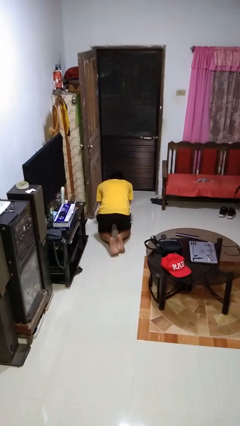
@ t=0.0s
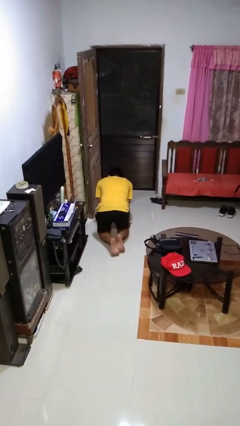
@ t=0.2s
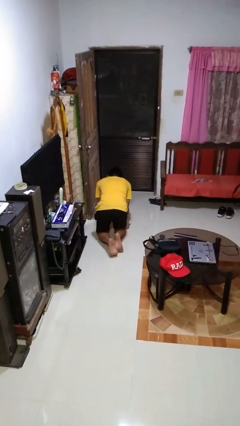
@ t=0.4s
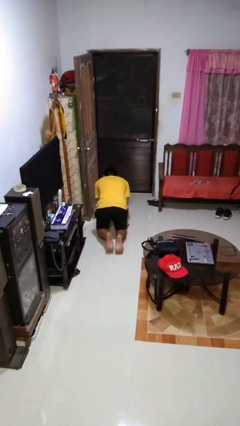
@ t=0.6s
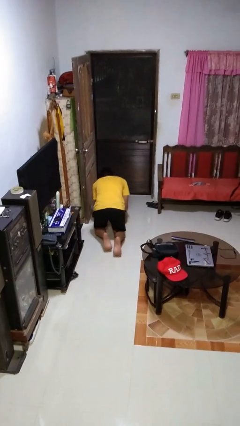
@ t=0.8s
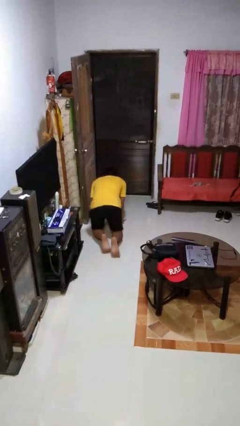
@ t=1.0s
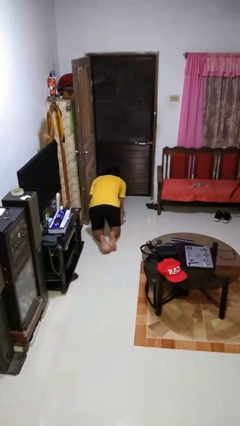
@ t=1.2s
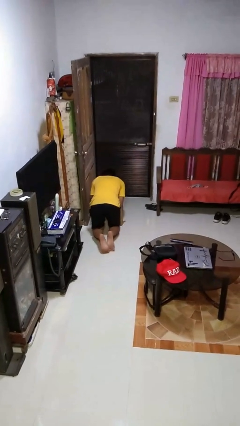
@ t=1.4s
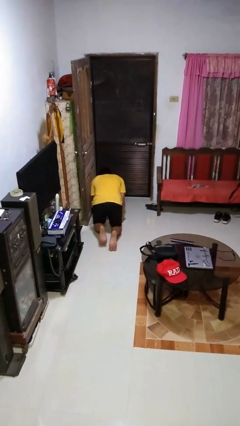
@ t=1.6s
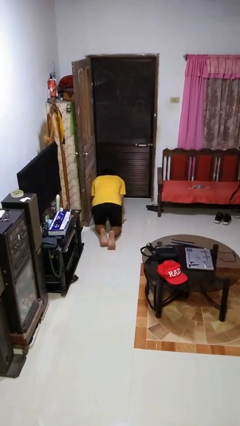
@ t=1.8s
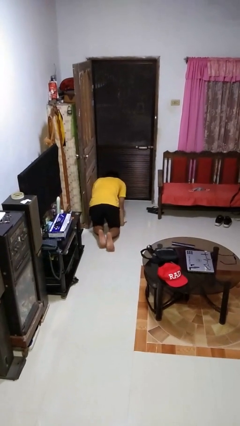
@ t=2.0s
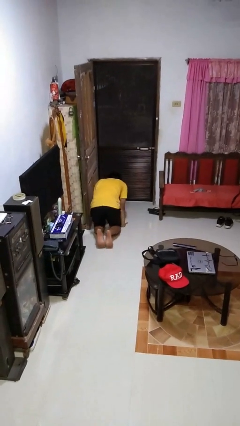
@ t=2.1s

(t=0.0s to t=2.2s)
person crawls

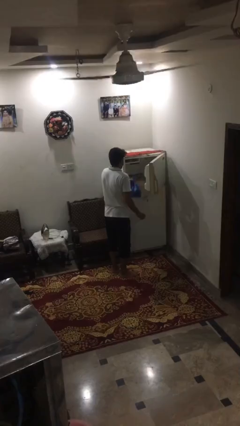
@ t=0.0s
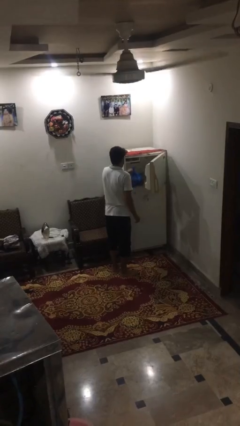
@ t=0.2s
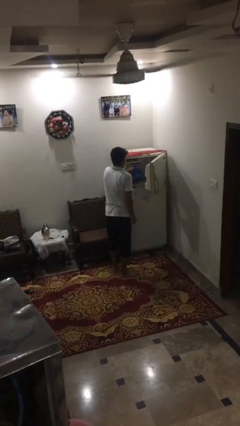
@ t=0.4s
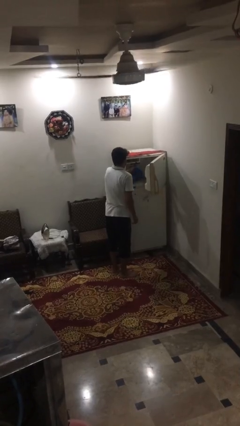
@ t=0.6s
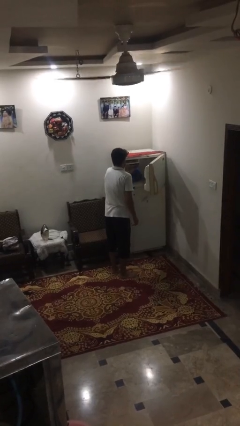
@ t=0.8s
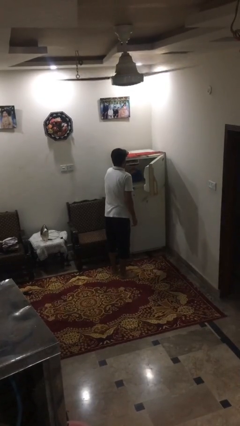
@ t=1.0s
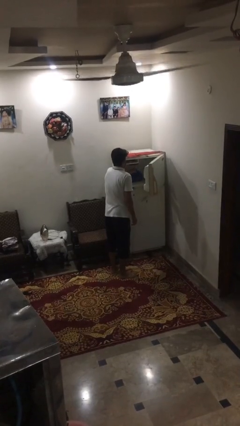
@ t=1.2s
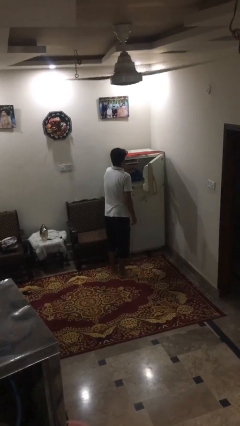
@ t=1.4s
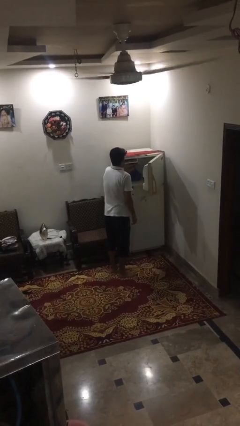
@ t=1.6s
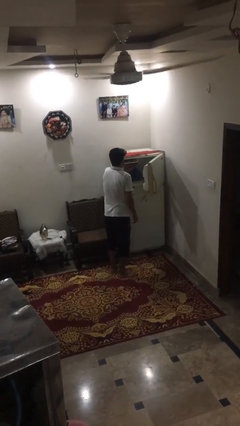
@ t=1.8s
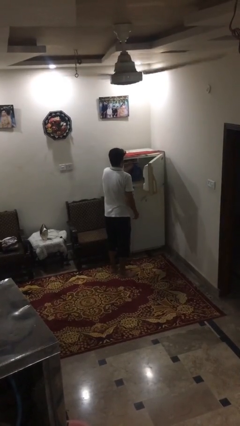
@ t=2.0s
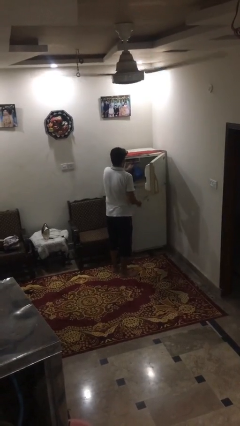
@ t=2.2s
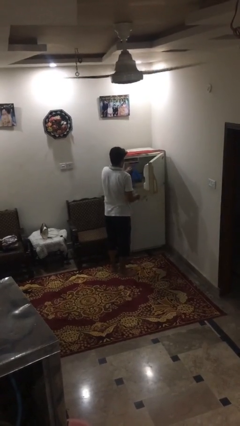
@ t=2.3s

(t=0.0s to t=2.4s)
person loads groceries into refrigerator

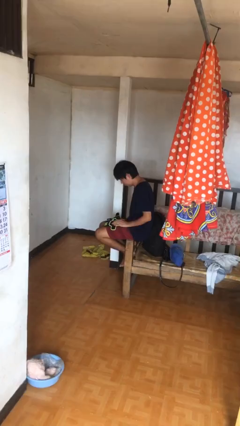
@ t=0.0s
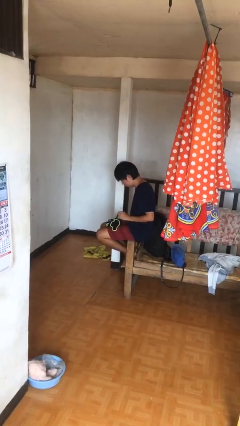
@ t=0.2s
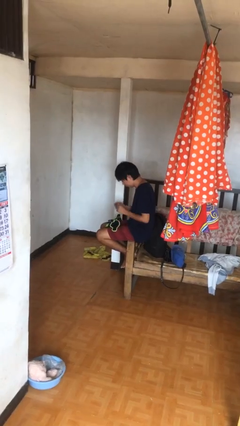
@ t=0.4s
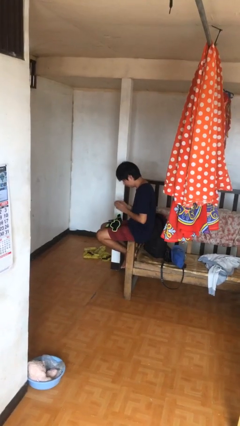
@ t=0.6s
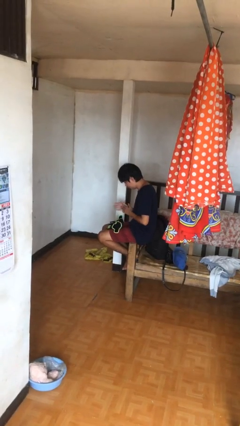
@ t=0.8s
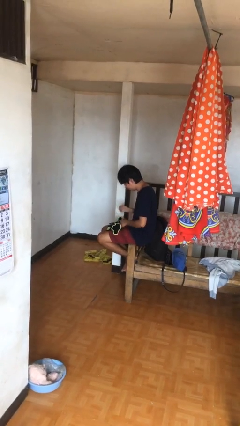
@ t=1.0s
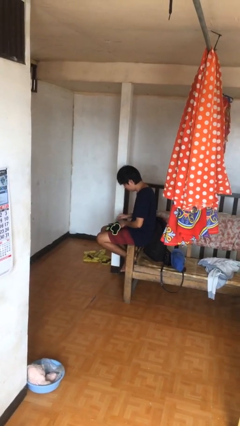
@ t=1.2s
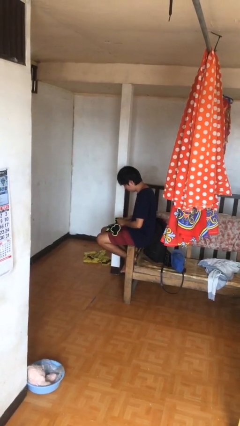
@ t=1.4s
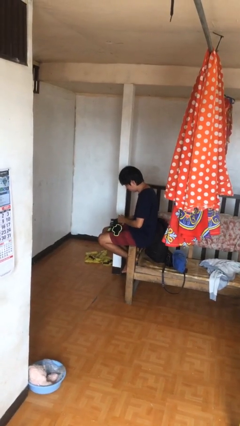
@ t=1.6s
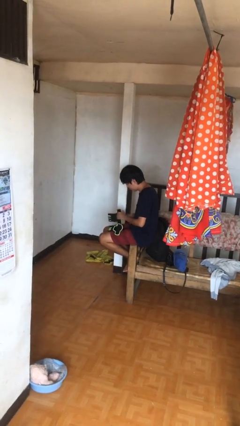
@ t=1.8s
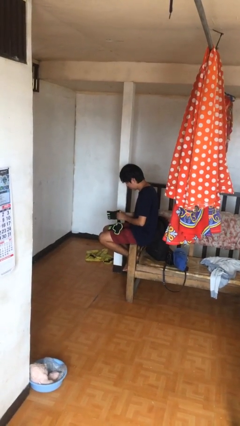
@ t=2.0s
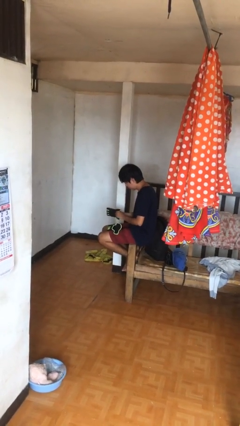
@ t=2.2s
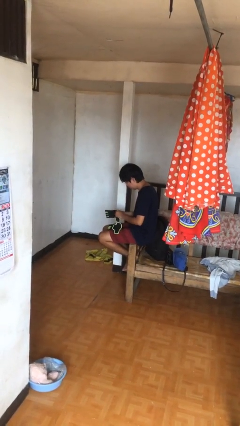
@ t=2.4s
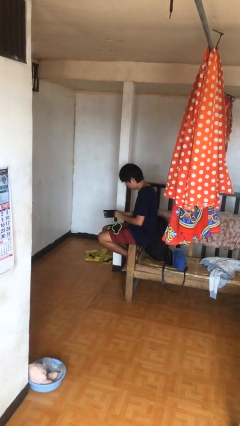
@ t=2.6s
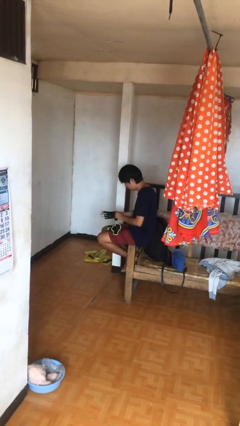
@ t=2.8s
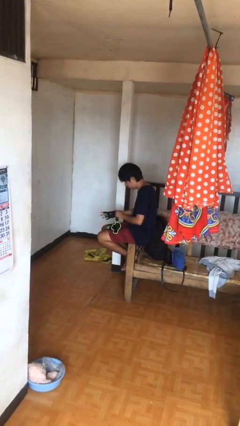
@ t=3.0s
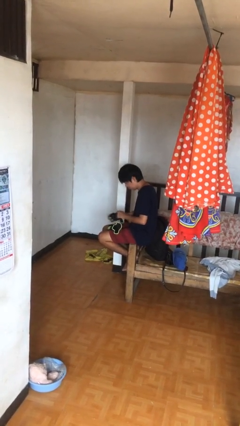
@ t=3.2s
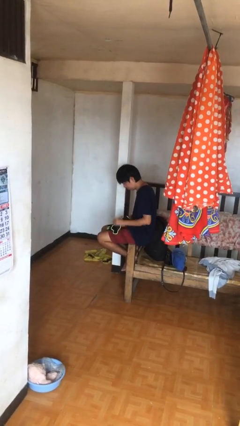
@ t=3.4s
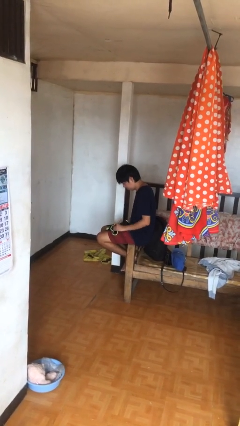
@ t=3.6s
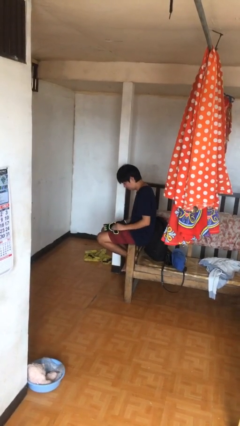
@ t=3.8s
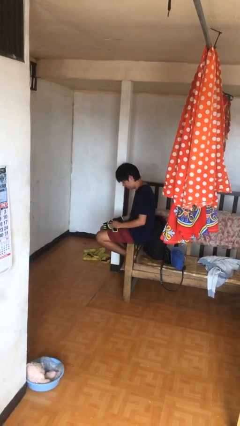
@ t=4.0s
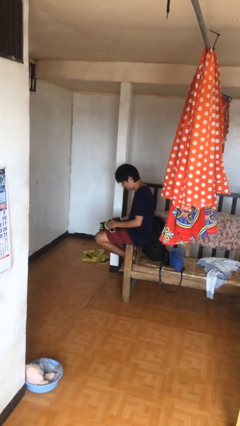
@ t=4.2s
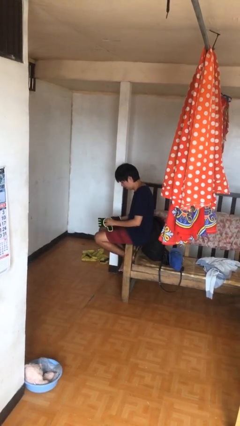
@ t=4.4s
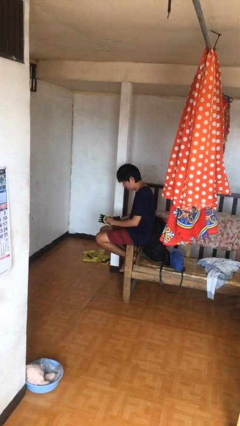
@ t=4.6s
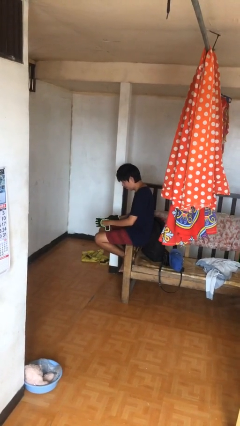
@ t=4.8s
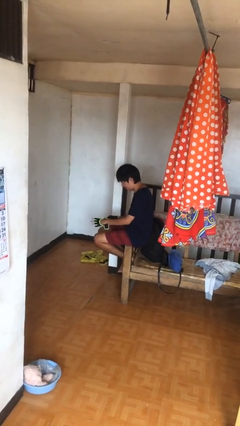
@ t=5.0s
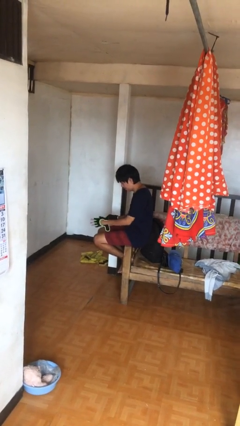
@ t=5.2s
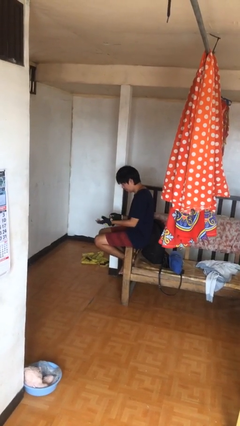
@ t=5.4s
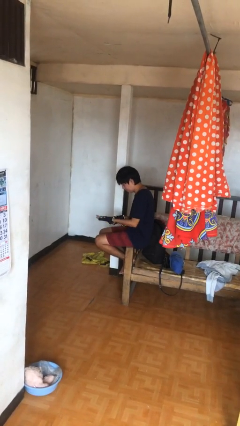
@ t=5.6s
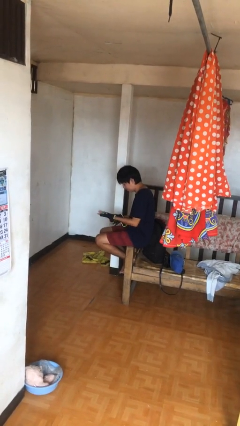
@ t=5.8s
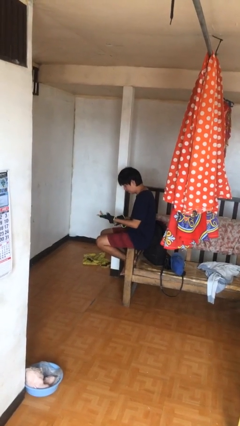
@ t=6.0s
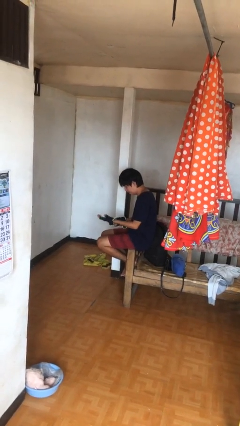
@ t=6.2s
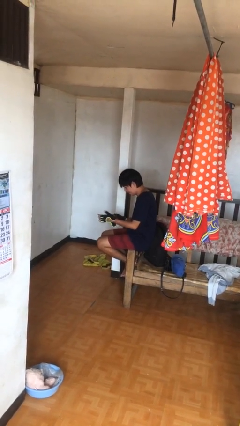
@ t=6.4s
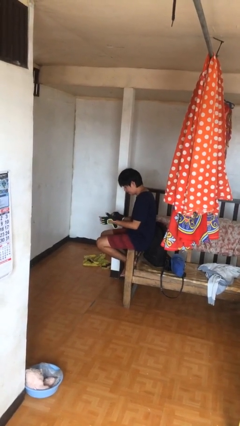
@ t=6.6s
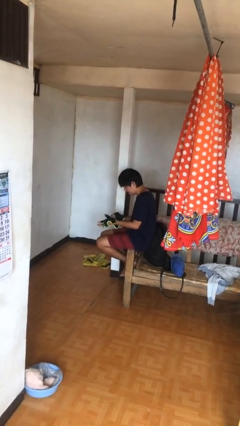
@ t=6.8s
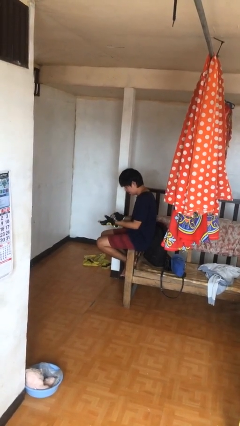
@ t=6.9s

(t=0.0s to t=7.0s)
person puts on gloves

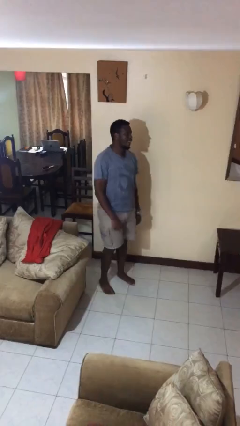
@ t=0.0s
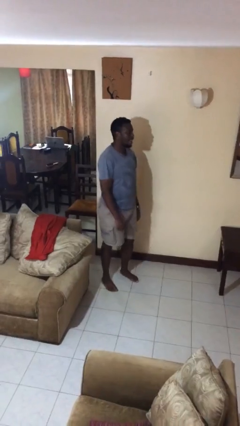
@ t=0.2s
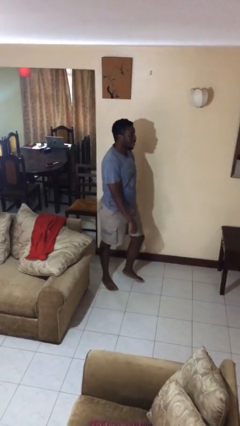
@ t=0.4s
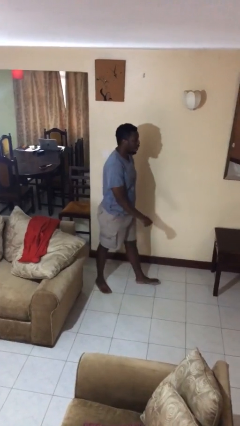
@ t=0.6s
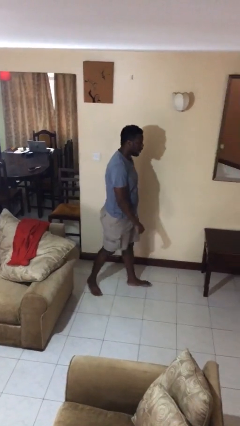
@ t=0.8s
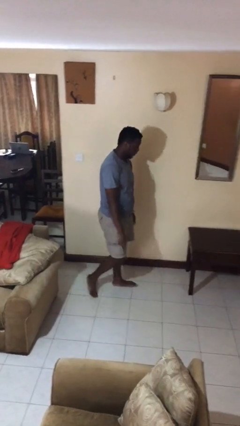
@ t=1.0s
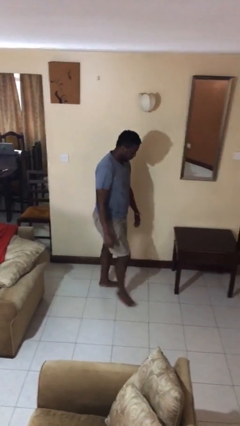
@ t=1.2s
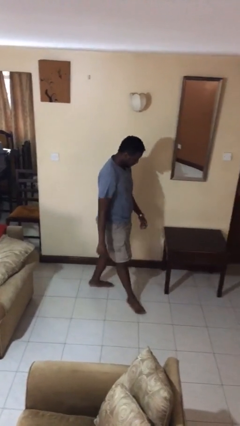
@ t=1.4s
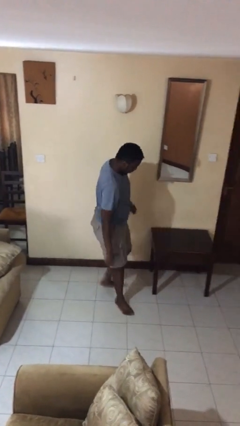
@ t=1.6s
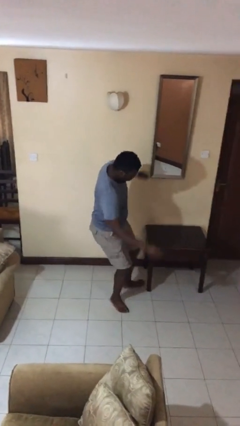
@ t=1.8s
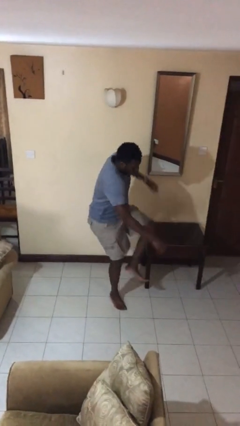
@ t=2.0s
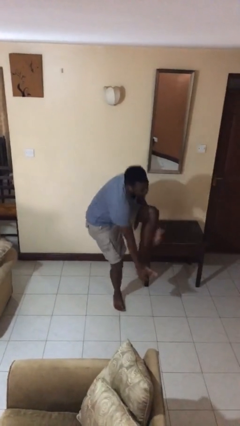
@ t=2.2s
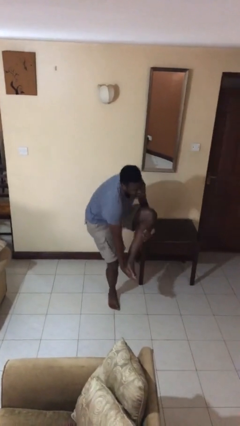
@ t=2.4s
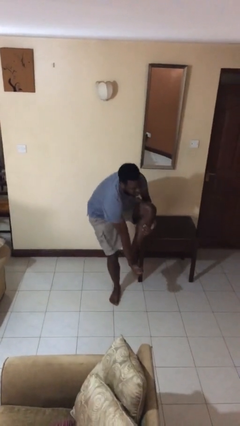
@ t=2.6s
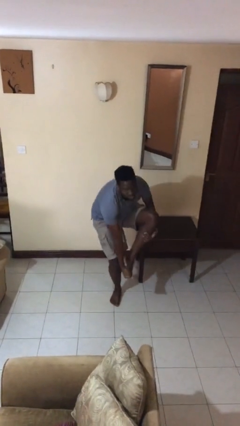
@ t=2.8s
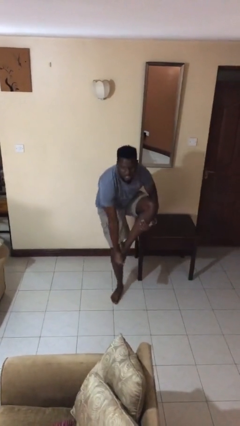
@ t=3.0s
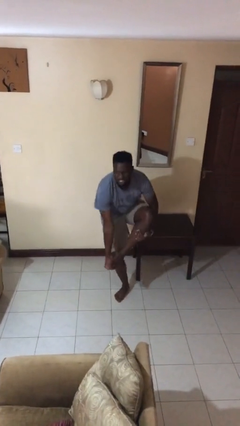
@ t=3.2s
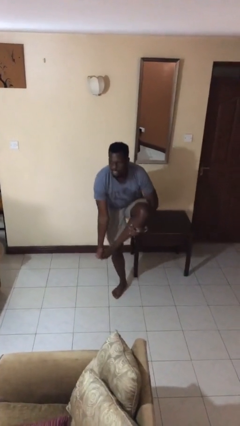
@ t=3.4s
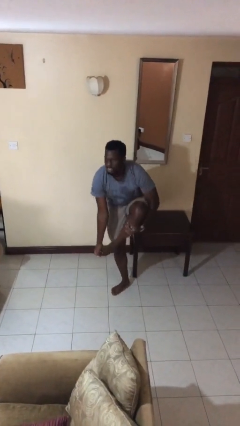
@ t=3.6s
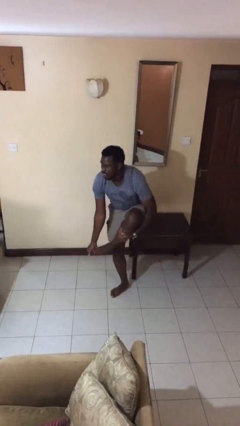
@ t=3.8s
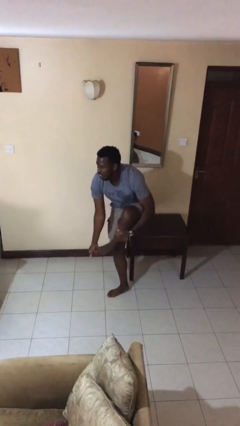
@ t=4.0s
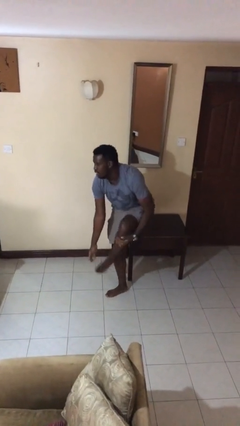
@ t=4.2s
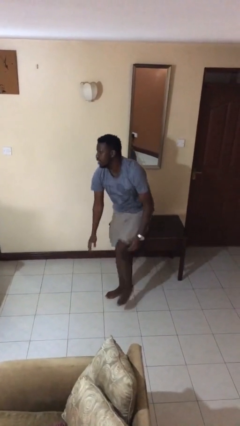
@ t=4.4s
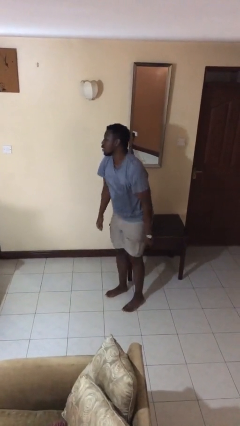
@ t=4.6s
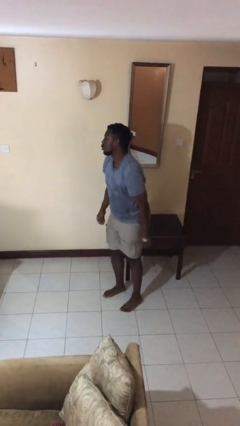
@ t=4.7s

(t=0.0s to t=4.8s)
person stubs toe

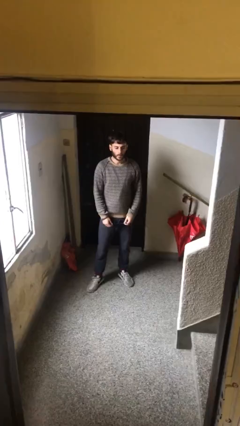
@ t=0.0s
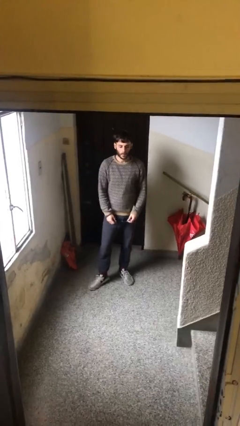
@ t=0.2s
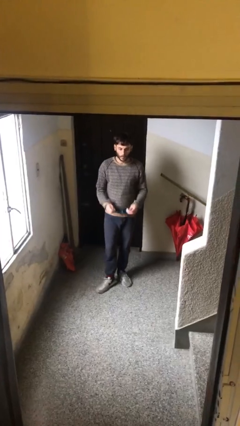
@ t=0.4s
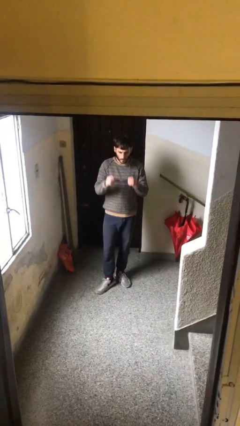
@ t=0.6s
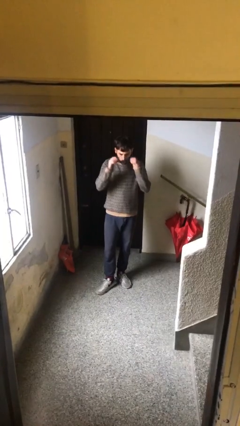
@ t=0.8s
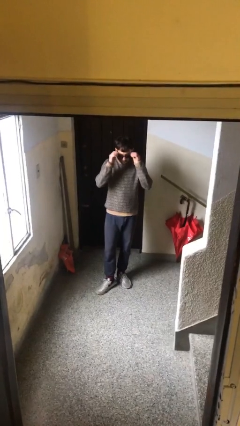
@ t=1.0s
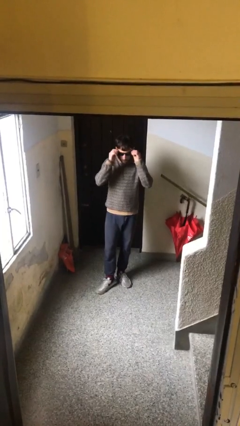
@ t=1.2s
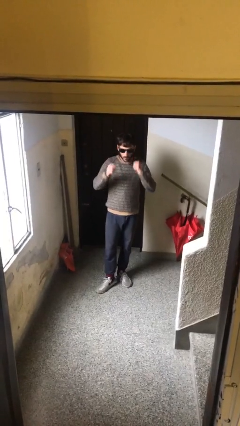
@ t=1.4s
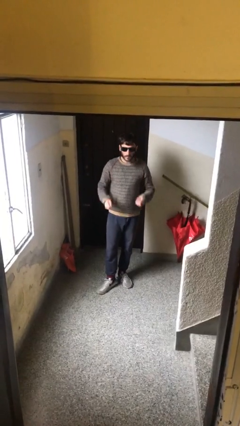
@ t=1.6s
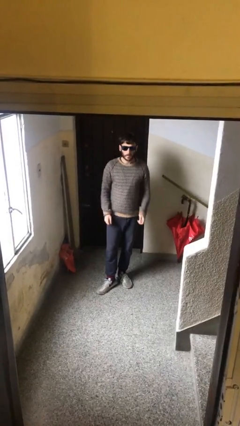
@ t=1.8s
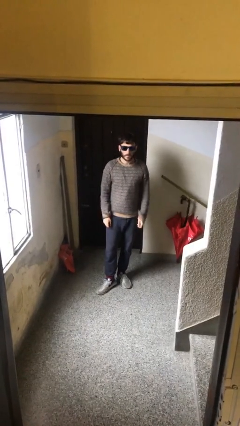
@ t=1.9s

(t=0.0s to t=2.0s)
person puts on sunglasses
